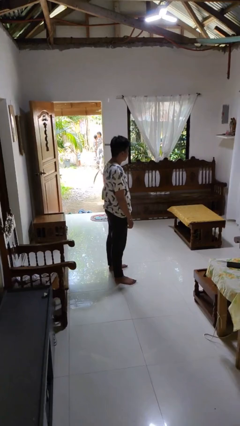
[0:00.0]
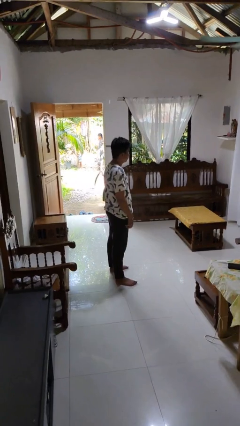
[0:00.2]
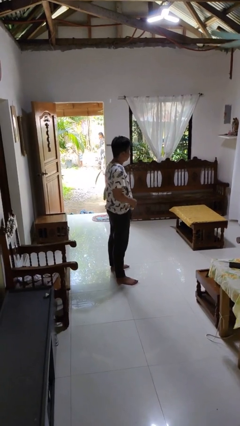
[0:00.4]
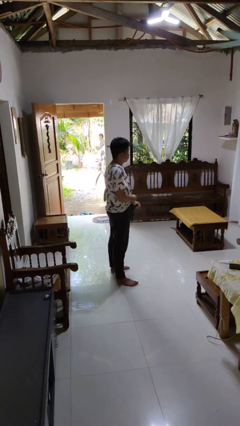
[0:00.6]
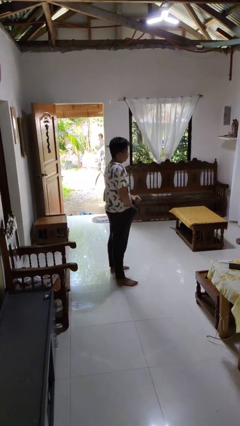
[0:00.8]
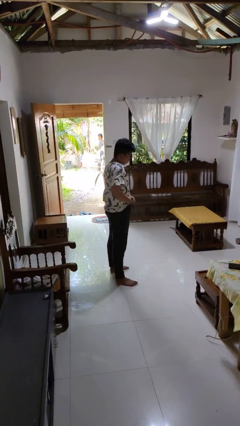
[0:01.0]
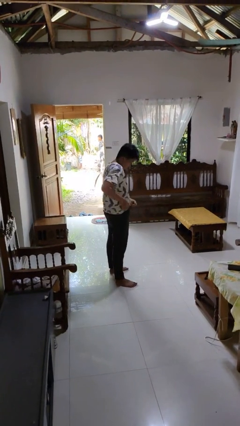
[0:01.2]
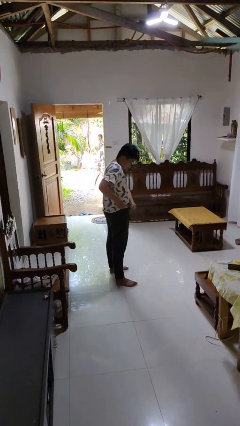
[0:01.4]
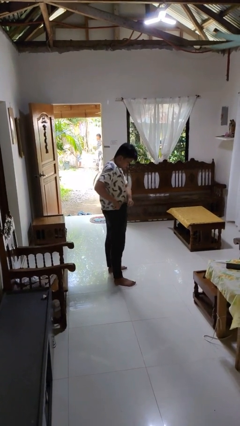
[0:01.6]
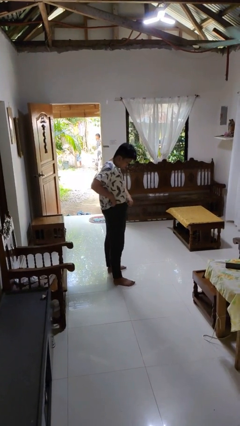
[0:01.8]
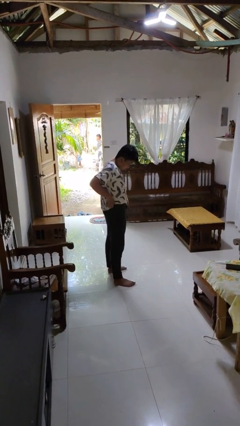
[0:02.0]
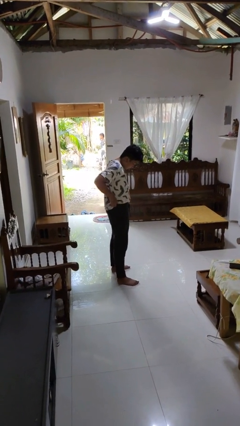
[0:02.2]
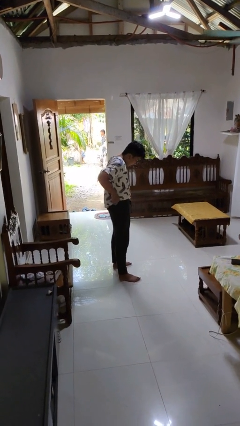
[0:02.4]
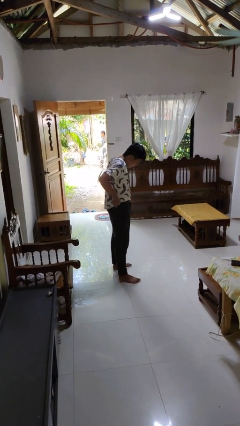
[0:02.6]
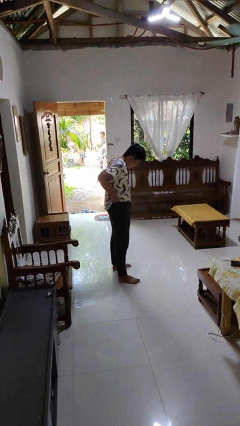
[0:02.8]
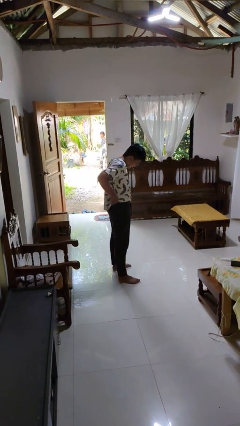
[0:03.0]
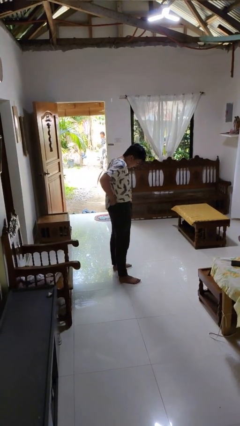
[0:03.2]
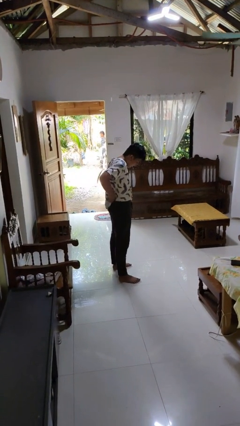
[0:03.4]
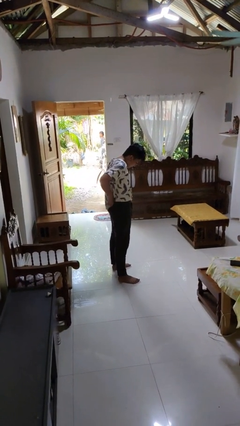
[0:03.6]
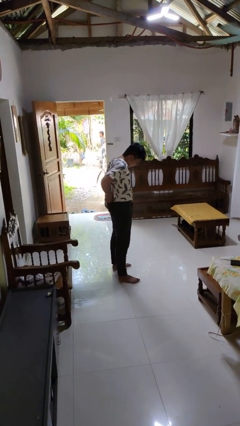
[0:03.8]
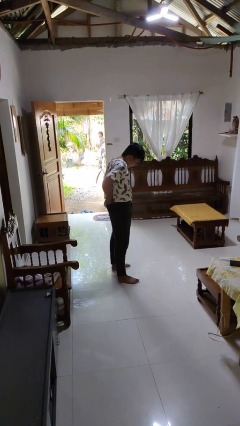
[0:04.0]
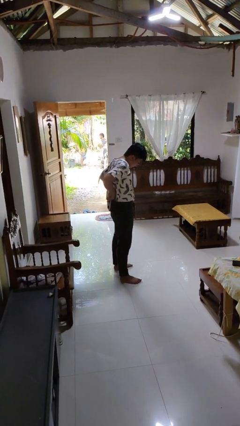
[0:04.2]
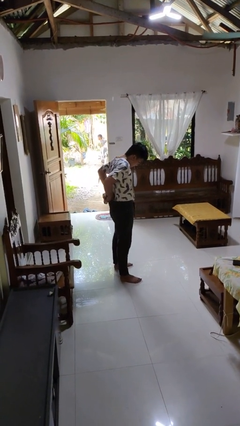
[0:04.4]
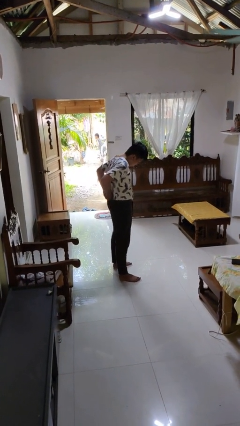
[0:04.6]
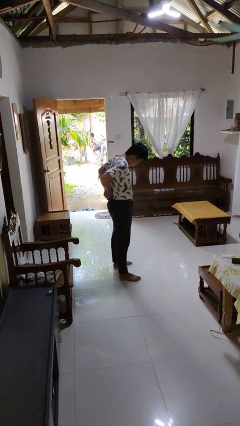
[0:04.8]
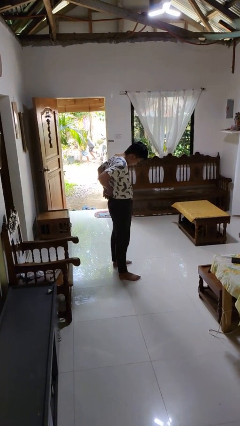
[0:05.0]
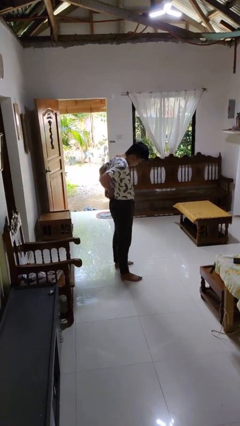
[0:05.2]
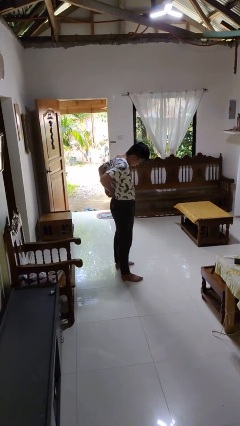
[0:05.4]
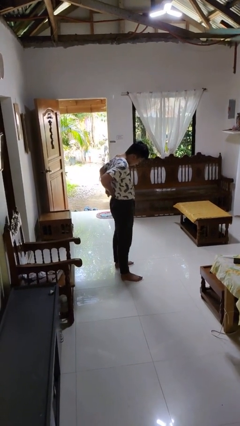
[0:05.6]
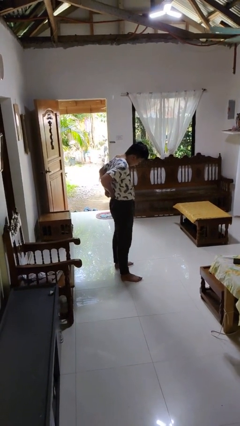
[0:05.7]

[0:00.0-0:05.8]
person tucks in shirt

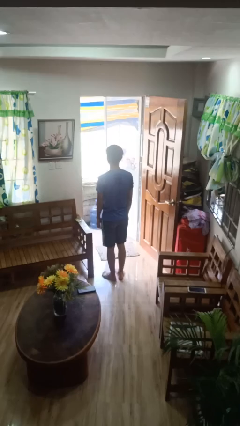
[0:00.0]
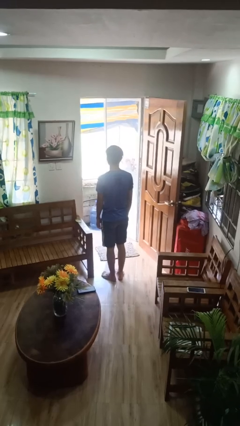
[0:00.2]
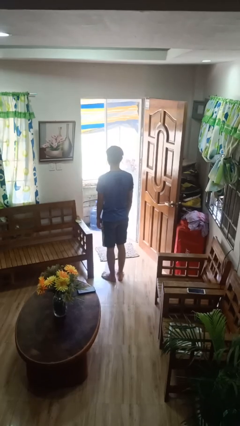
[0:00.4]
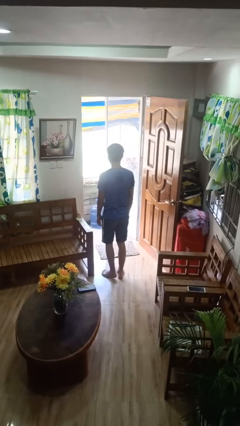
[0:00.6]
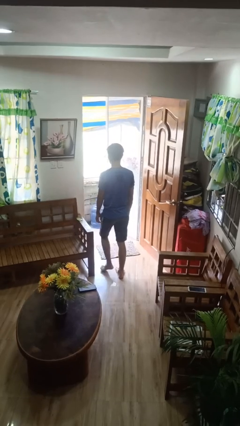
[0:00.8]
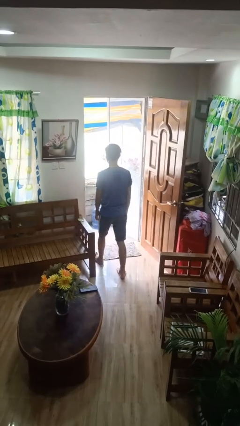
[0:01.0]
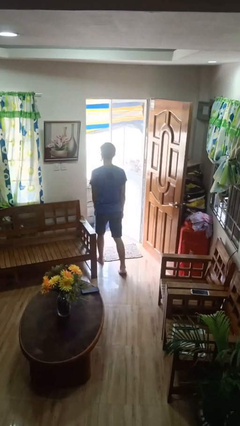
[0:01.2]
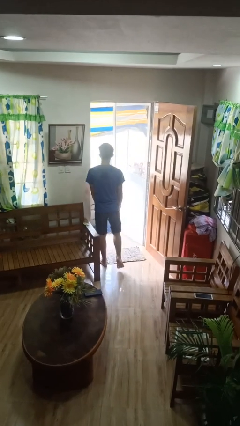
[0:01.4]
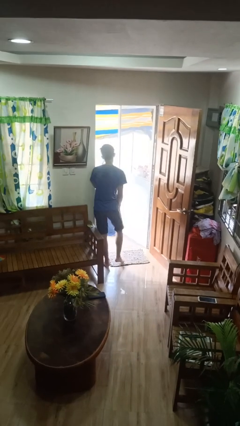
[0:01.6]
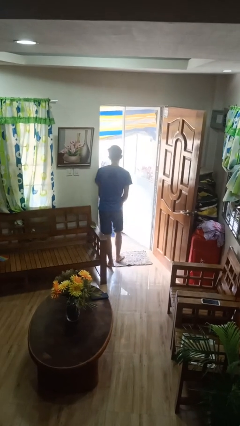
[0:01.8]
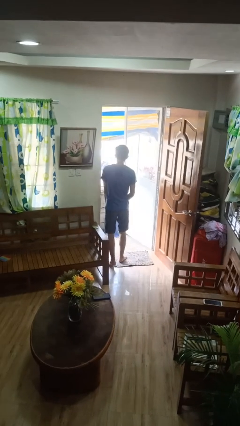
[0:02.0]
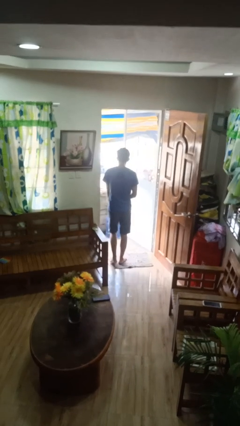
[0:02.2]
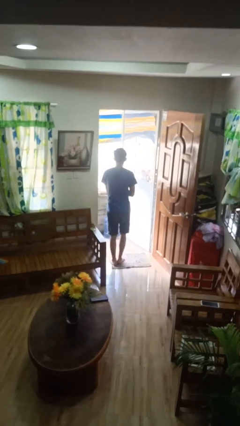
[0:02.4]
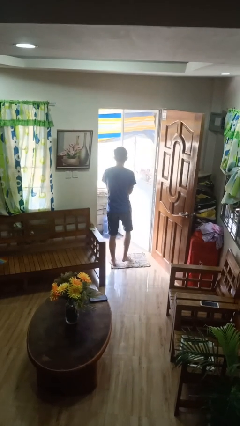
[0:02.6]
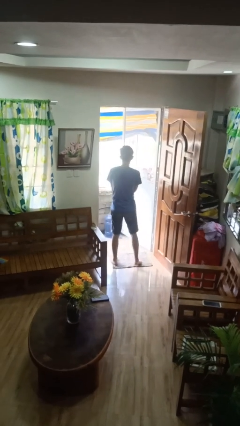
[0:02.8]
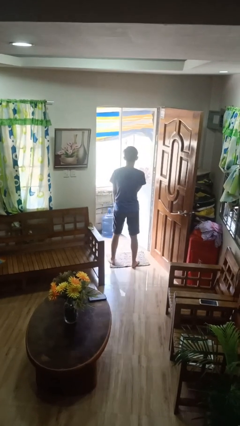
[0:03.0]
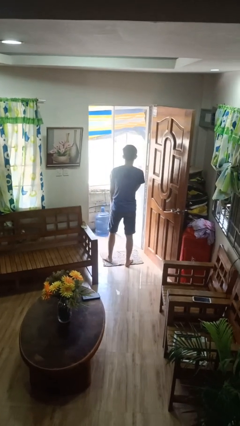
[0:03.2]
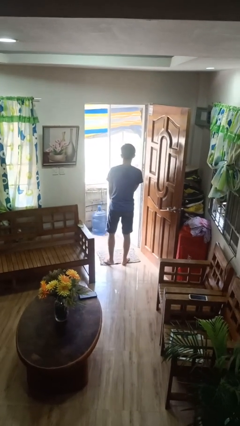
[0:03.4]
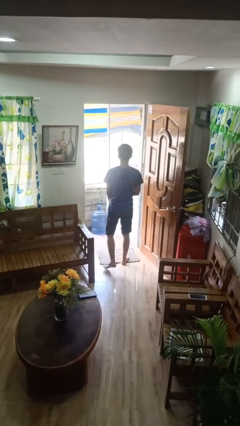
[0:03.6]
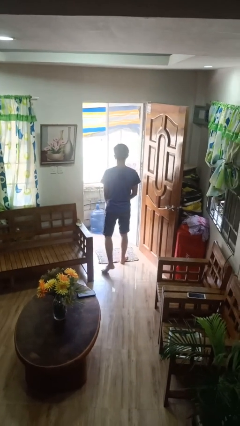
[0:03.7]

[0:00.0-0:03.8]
person bumps into wall

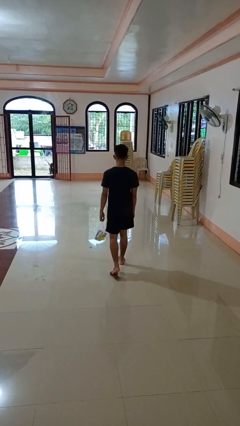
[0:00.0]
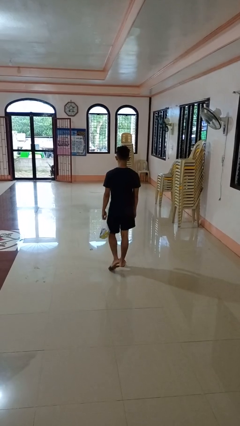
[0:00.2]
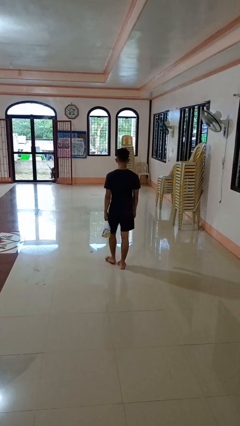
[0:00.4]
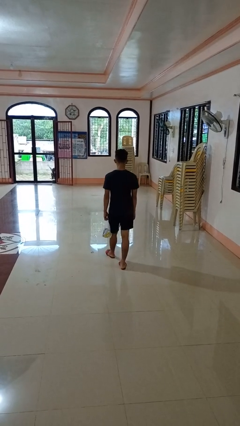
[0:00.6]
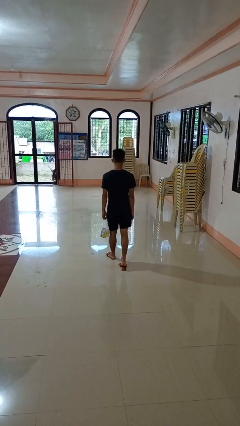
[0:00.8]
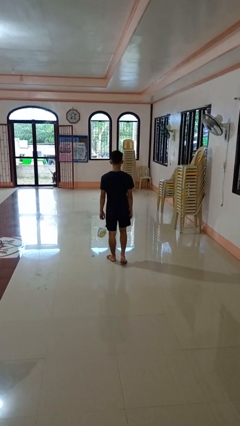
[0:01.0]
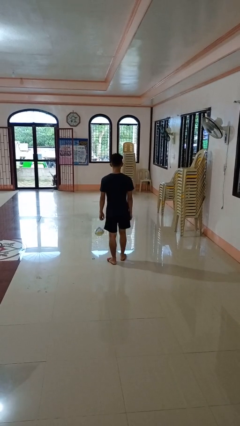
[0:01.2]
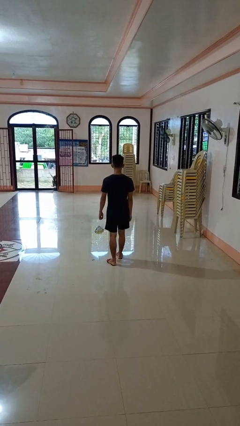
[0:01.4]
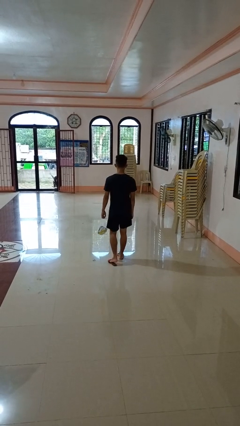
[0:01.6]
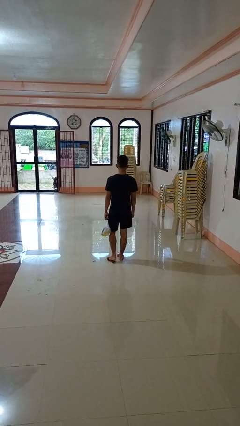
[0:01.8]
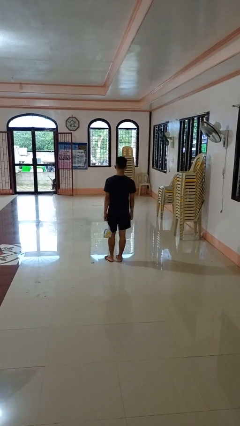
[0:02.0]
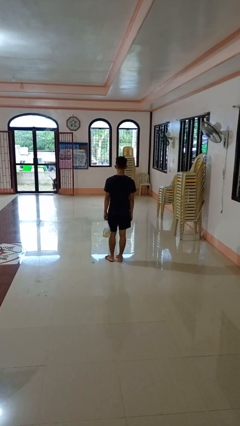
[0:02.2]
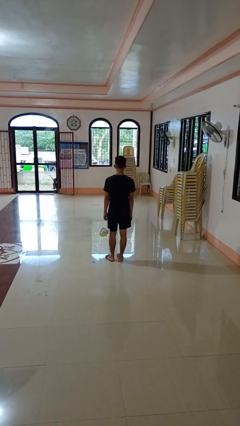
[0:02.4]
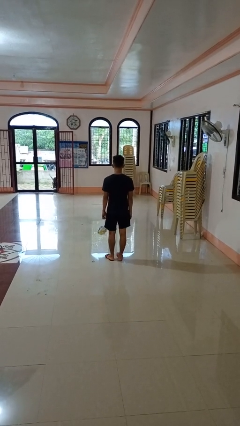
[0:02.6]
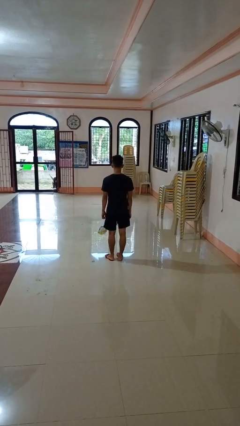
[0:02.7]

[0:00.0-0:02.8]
person carries groceries

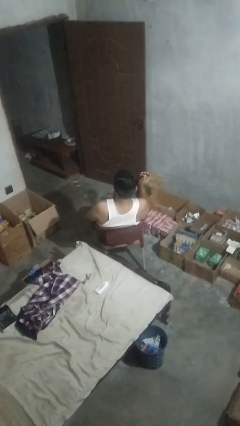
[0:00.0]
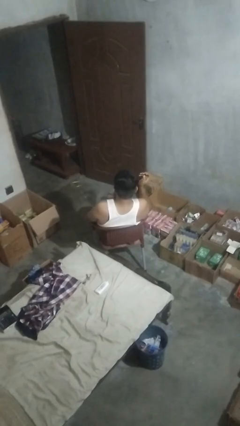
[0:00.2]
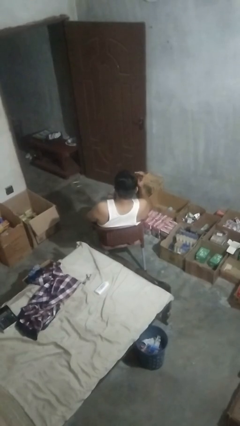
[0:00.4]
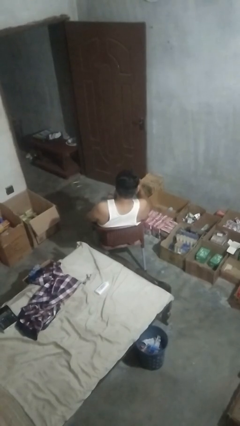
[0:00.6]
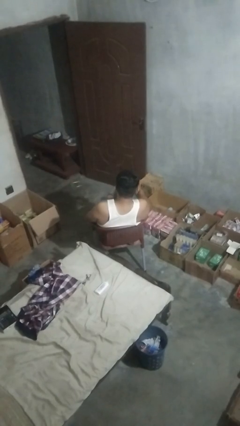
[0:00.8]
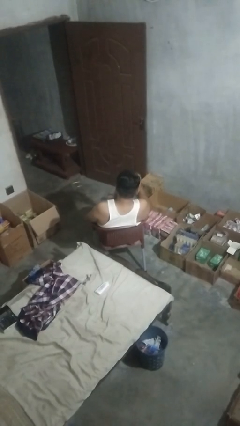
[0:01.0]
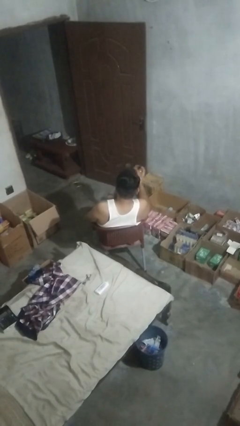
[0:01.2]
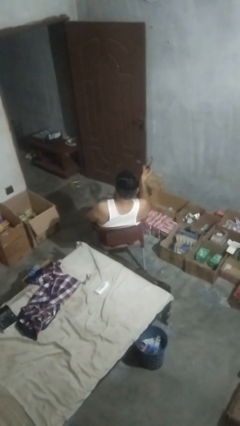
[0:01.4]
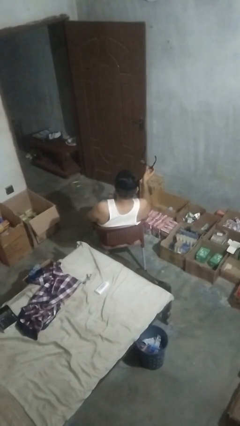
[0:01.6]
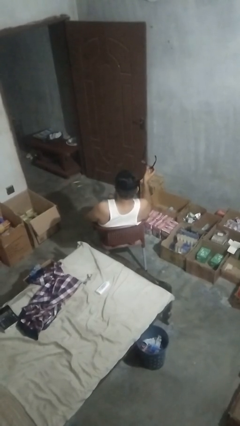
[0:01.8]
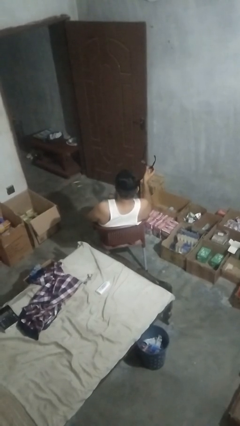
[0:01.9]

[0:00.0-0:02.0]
person takes off sunglasses

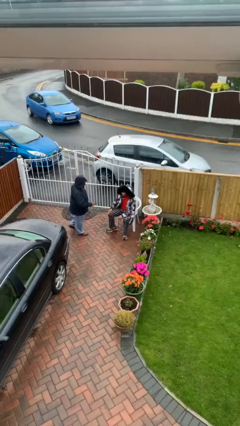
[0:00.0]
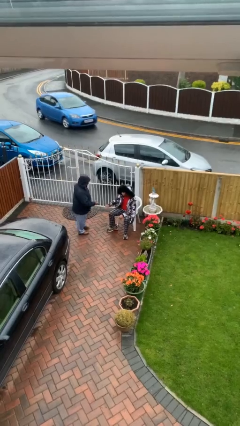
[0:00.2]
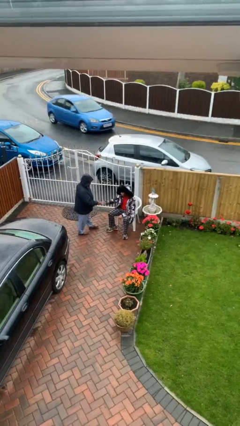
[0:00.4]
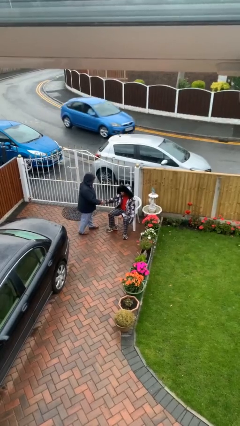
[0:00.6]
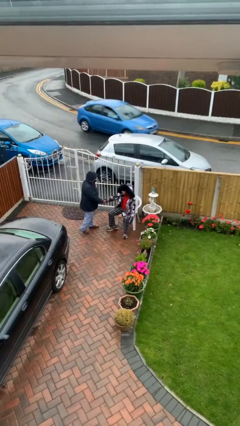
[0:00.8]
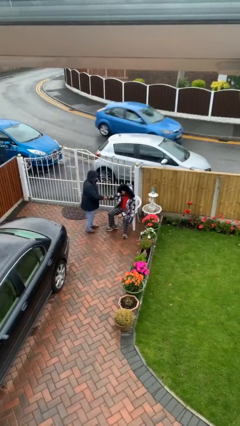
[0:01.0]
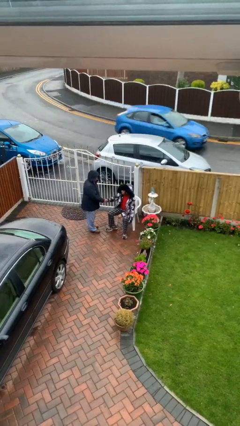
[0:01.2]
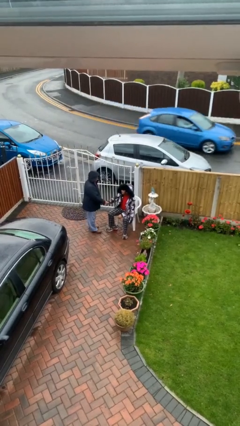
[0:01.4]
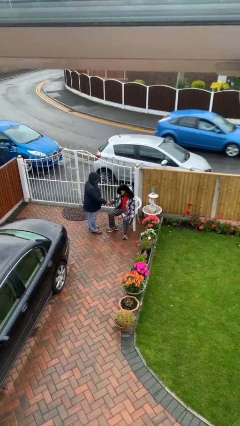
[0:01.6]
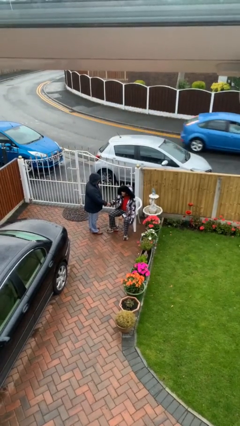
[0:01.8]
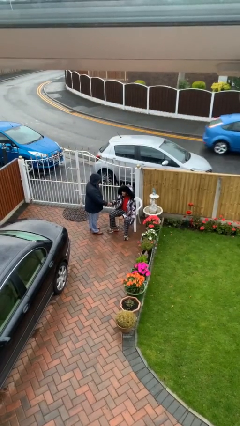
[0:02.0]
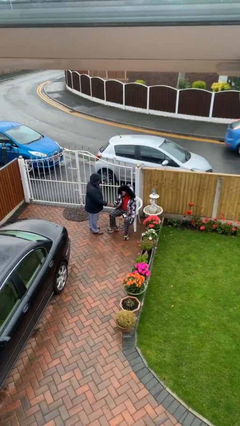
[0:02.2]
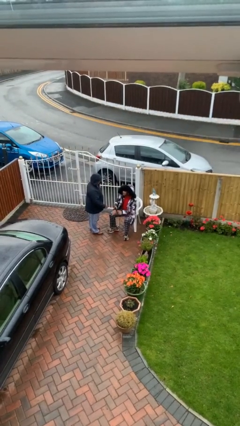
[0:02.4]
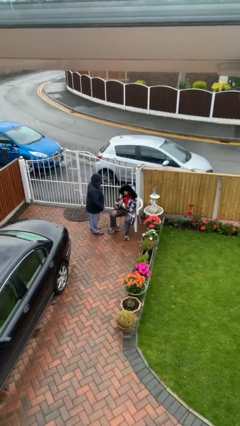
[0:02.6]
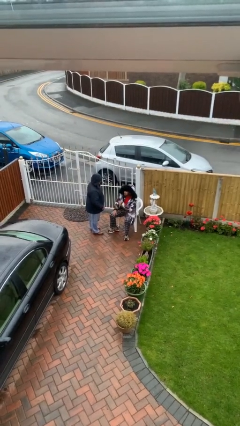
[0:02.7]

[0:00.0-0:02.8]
person shakes hand

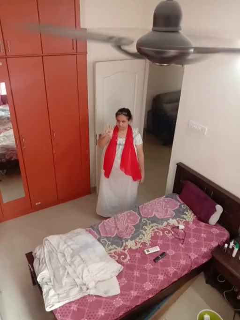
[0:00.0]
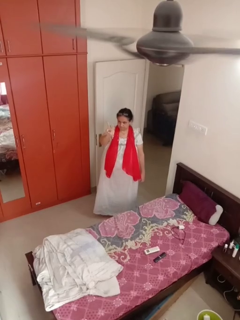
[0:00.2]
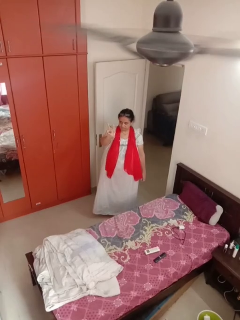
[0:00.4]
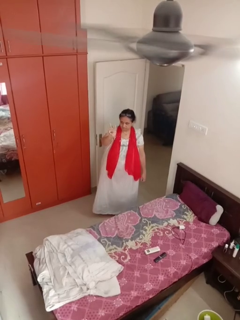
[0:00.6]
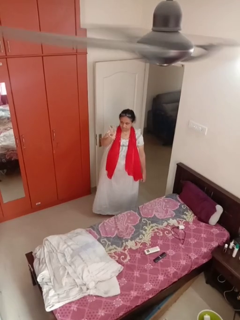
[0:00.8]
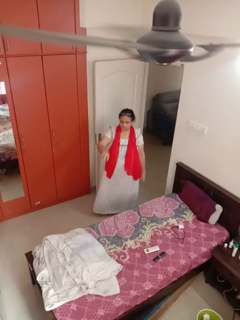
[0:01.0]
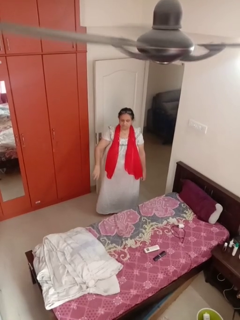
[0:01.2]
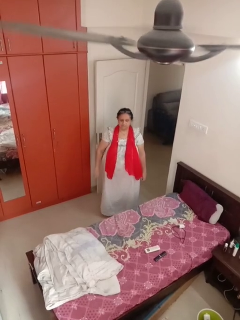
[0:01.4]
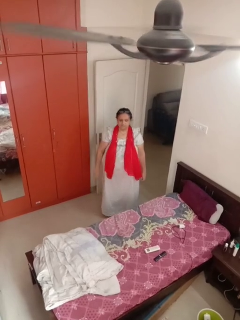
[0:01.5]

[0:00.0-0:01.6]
person gestures peace
